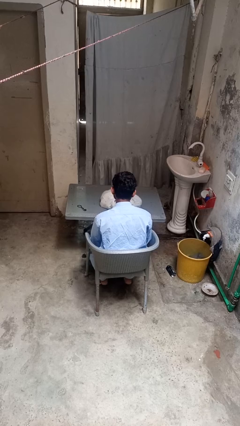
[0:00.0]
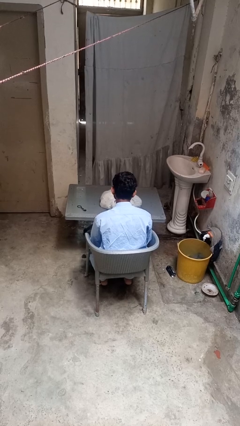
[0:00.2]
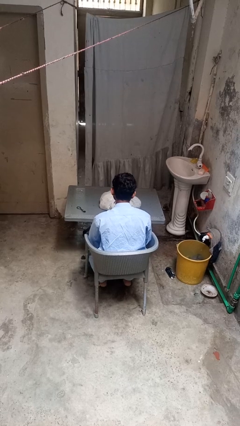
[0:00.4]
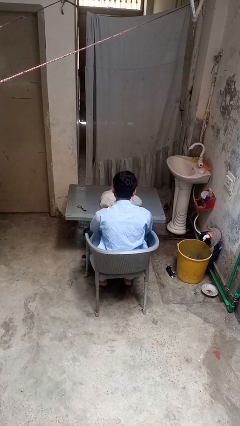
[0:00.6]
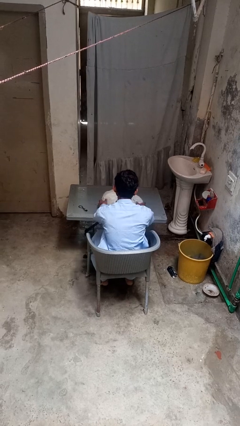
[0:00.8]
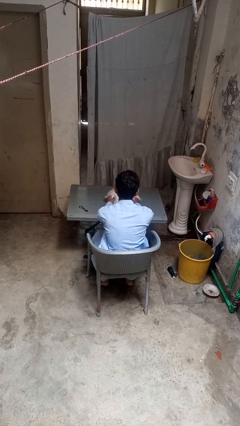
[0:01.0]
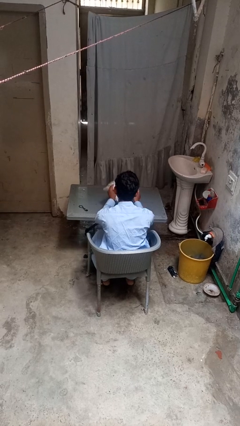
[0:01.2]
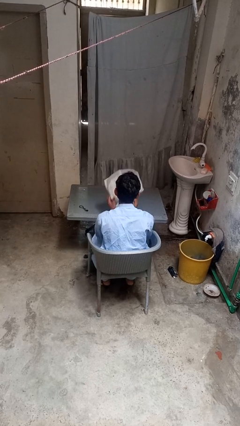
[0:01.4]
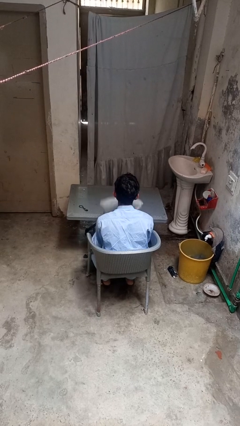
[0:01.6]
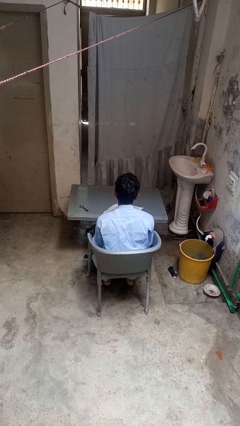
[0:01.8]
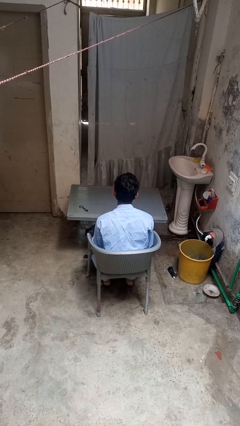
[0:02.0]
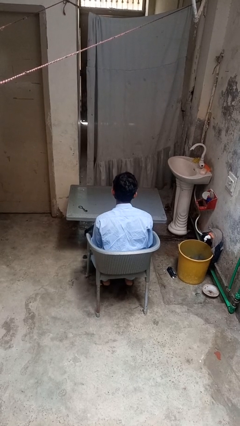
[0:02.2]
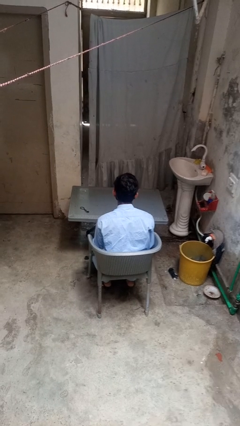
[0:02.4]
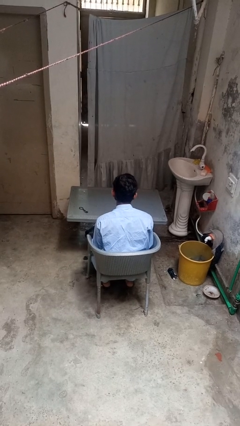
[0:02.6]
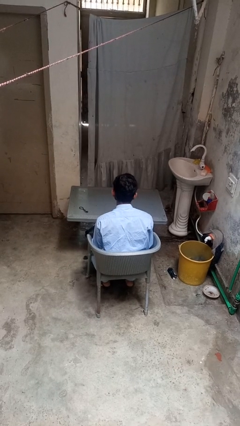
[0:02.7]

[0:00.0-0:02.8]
person picks up object from table

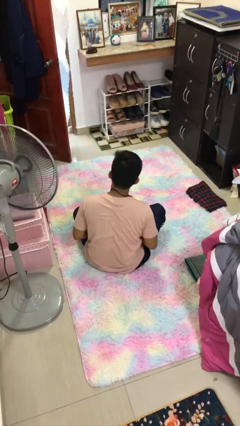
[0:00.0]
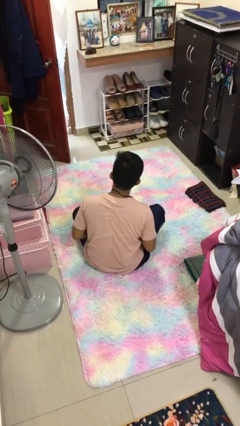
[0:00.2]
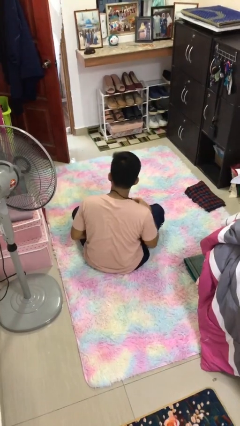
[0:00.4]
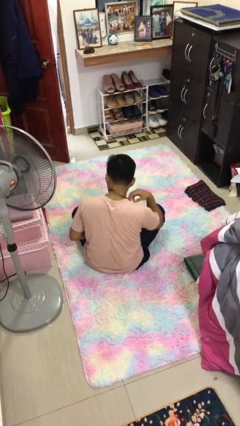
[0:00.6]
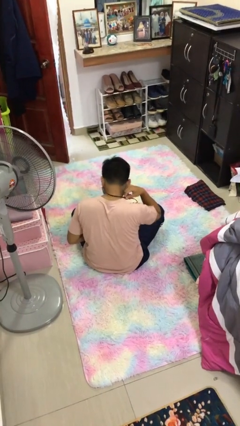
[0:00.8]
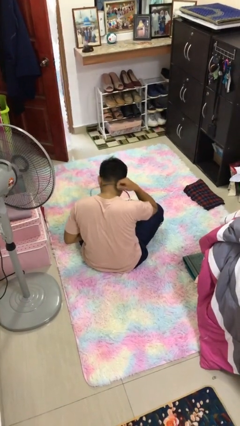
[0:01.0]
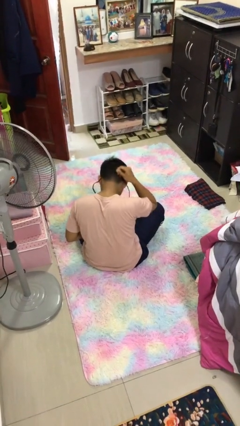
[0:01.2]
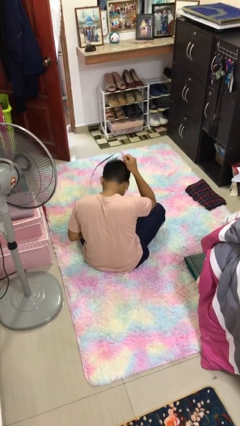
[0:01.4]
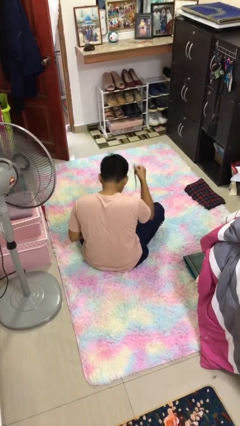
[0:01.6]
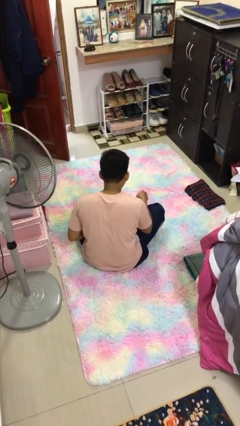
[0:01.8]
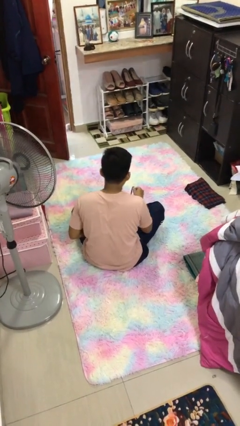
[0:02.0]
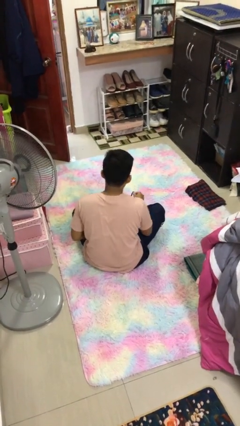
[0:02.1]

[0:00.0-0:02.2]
person takes off necklace

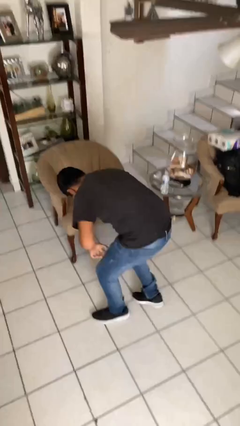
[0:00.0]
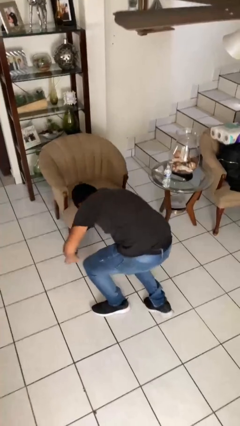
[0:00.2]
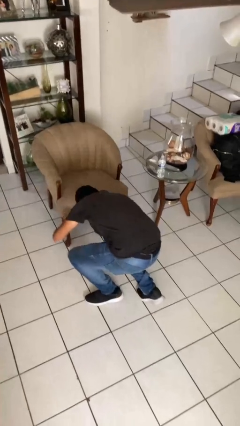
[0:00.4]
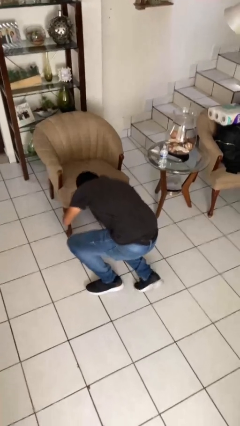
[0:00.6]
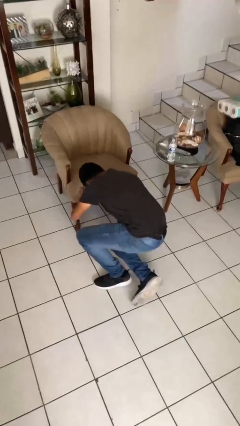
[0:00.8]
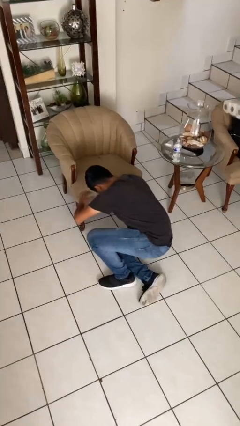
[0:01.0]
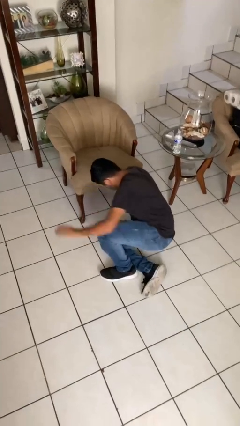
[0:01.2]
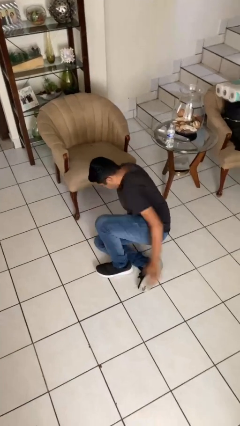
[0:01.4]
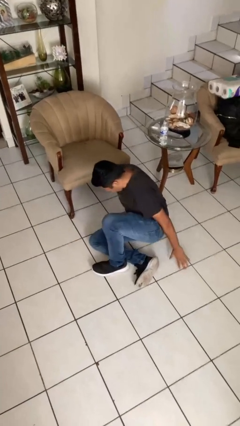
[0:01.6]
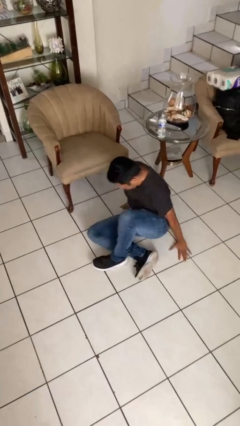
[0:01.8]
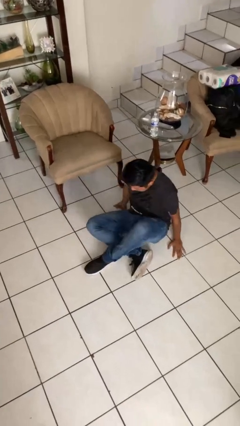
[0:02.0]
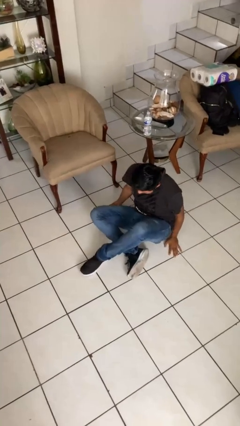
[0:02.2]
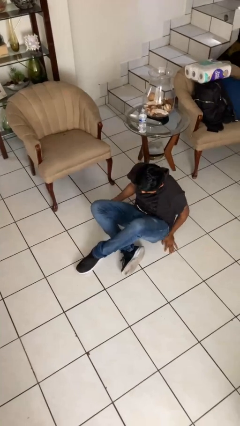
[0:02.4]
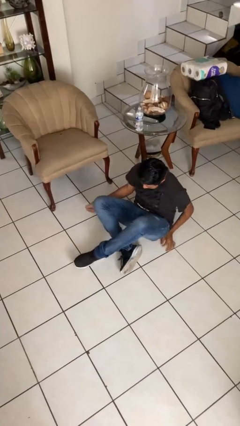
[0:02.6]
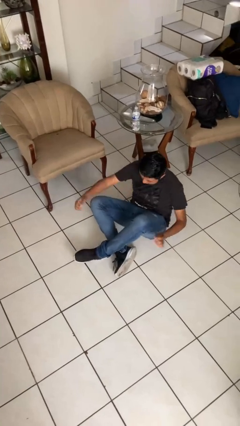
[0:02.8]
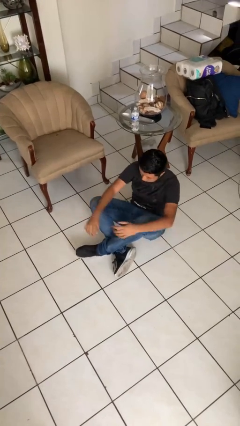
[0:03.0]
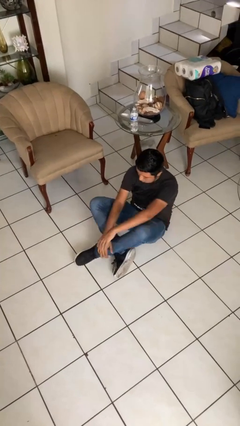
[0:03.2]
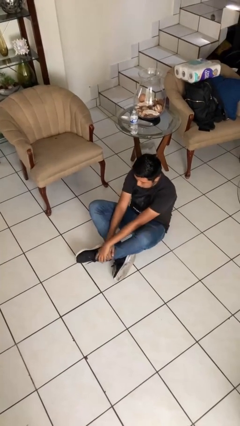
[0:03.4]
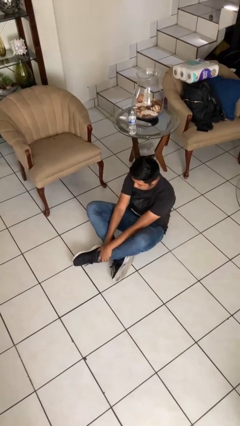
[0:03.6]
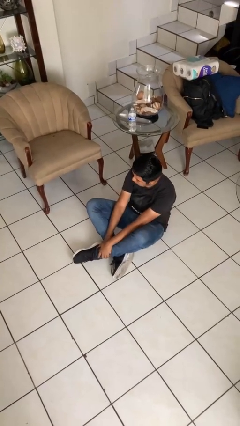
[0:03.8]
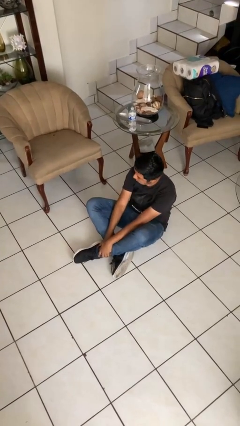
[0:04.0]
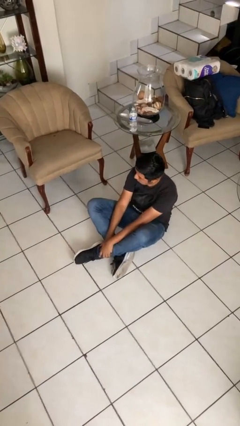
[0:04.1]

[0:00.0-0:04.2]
person sits crisscross

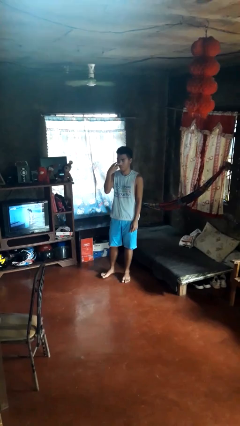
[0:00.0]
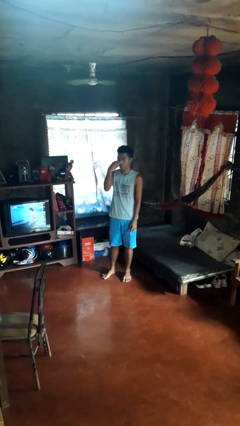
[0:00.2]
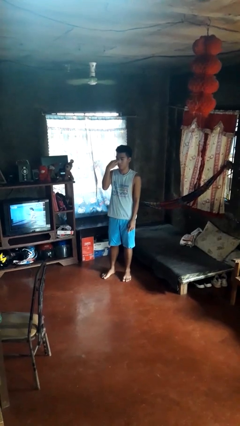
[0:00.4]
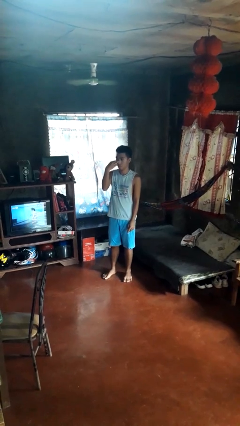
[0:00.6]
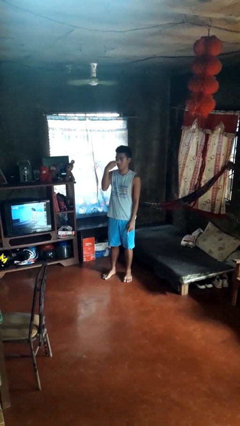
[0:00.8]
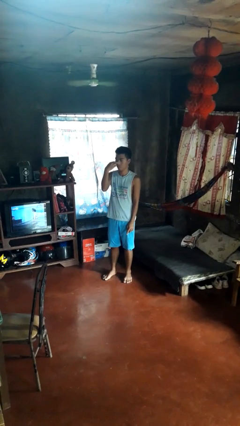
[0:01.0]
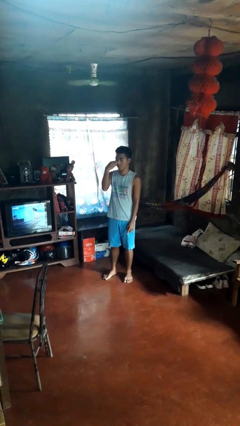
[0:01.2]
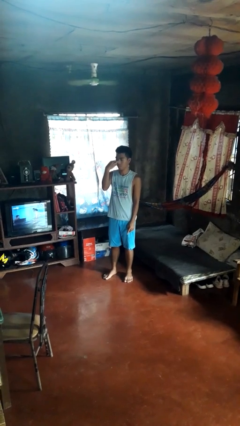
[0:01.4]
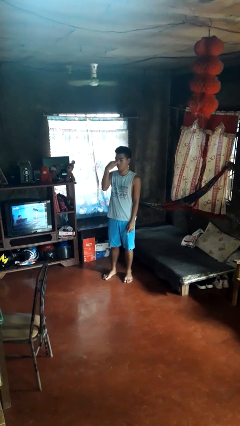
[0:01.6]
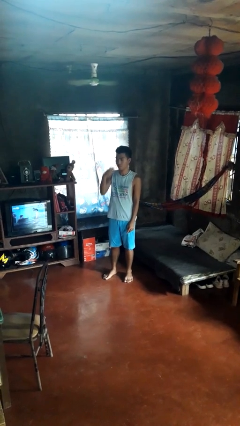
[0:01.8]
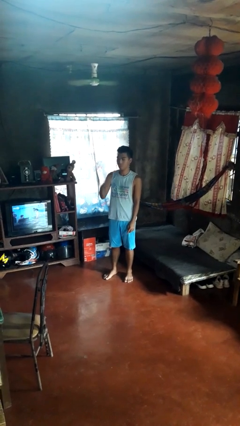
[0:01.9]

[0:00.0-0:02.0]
person gestures watch closely

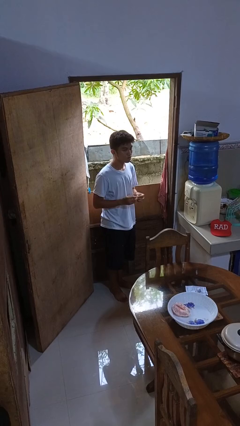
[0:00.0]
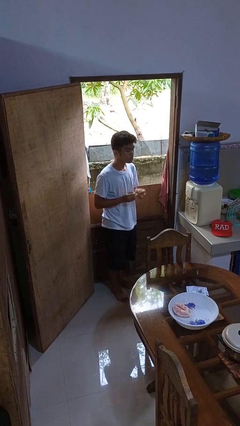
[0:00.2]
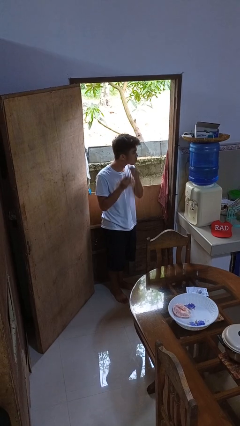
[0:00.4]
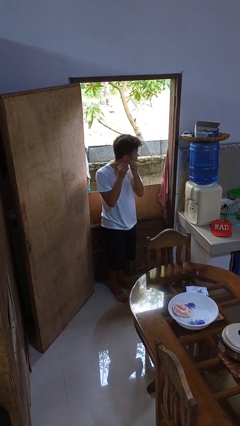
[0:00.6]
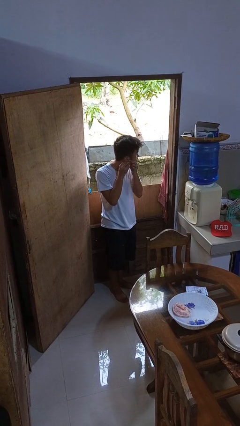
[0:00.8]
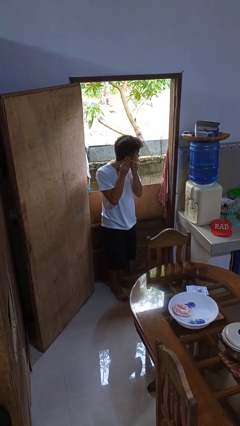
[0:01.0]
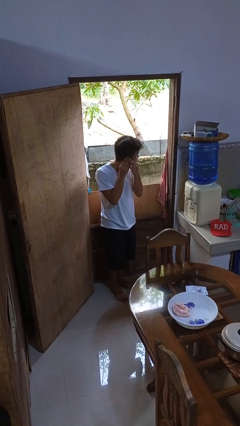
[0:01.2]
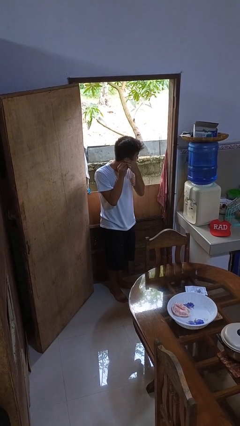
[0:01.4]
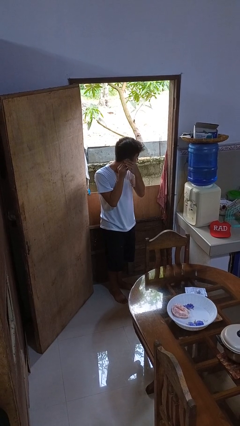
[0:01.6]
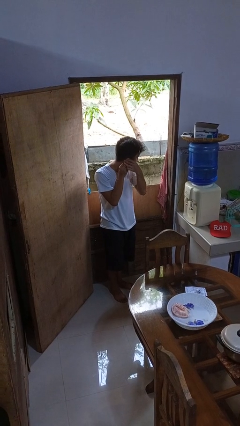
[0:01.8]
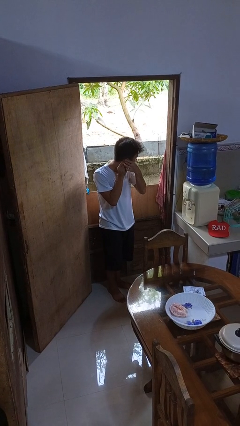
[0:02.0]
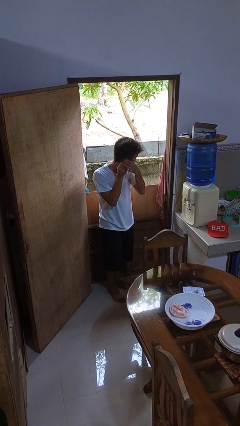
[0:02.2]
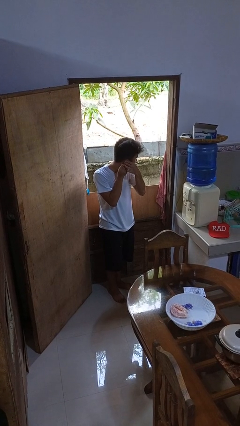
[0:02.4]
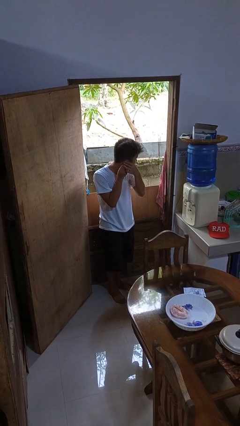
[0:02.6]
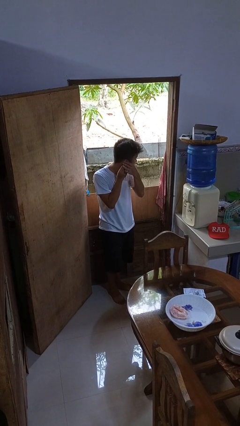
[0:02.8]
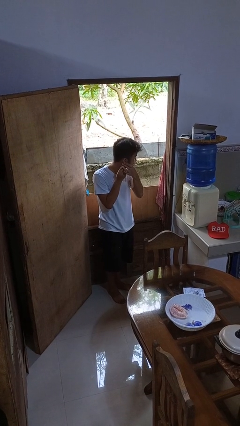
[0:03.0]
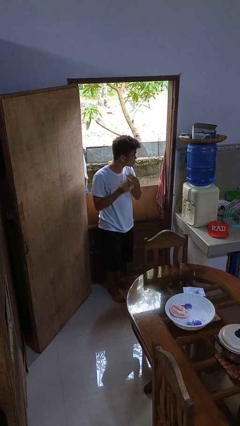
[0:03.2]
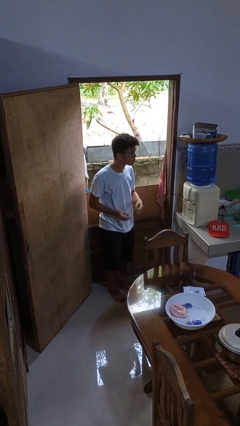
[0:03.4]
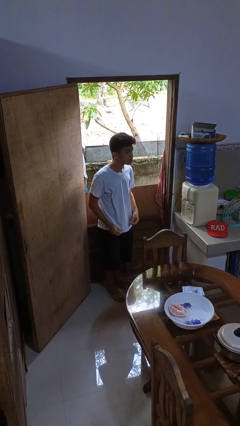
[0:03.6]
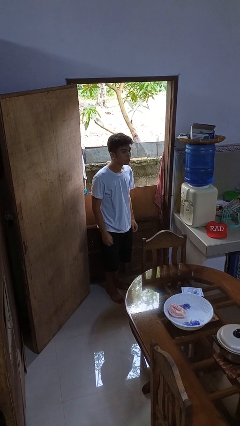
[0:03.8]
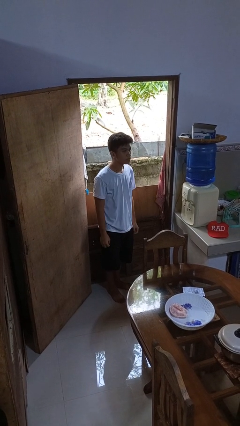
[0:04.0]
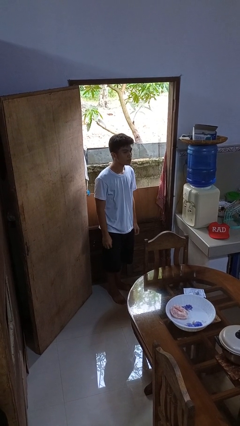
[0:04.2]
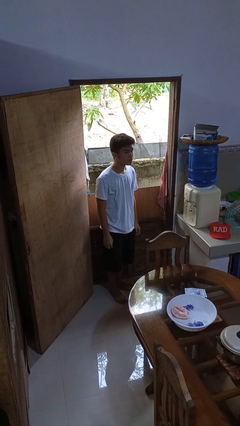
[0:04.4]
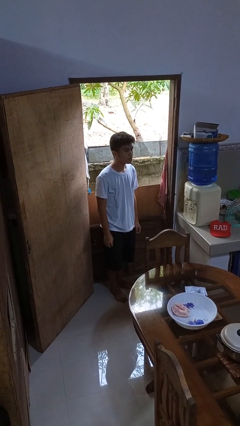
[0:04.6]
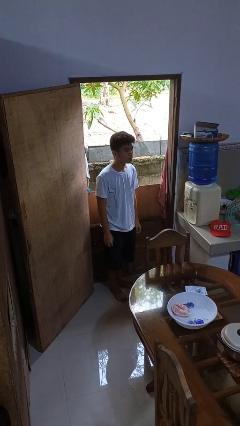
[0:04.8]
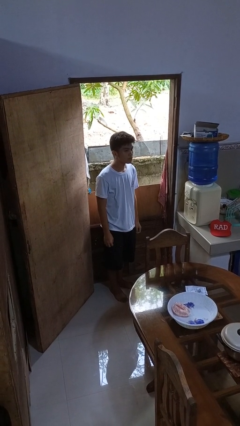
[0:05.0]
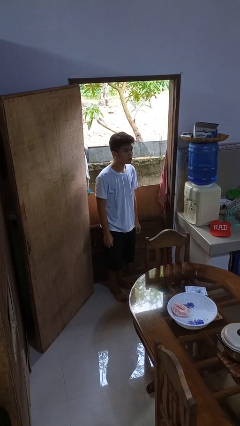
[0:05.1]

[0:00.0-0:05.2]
person puts on earrings

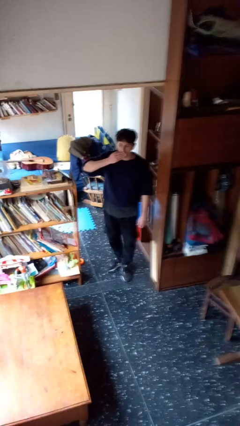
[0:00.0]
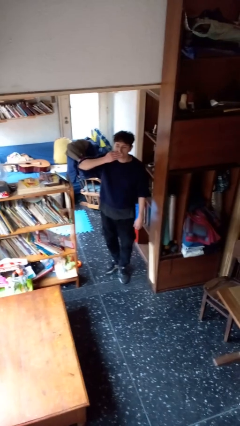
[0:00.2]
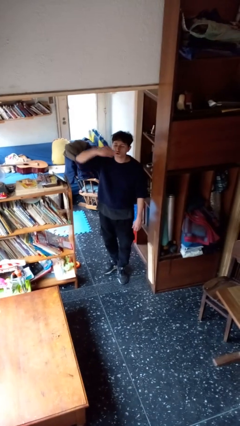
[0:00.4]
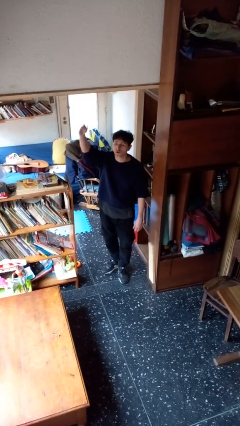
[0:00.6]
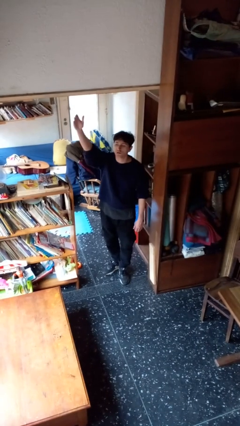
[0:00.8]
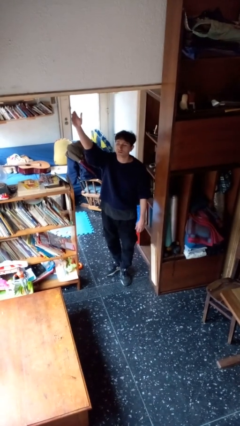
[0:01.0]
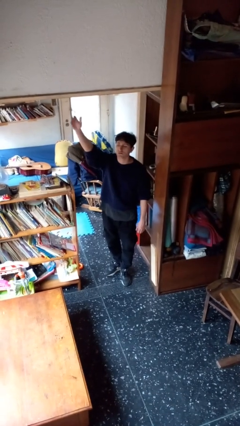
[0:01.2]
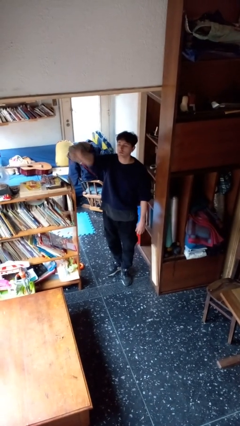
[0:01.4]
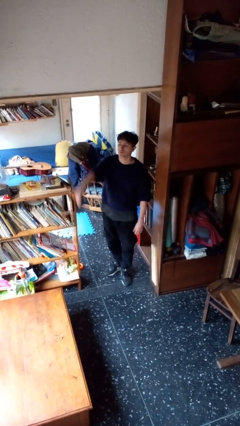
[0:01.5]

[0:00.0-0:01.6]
person gestures blow kiss
